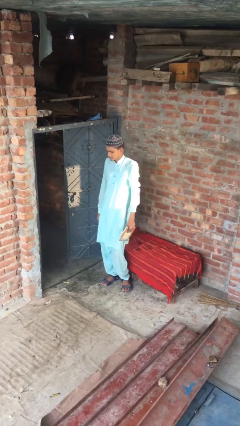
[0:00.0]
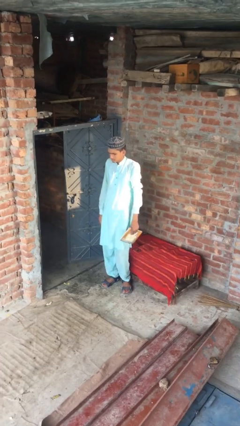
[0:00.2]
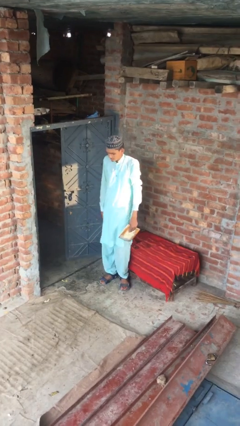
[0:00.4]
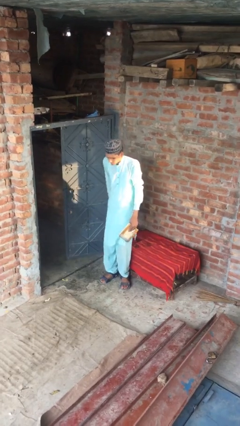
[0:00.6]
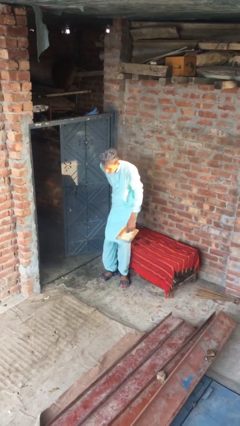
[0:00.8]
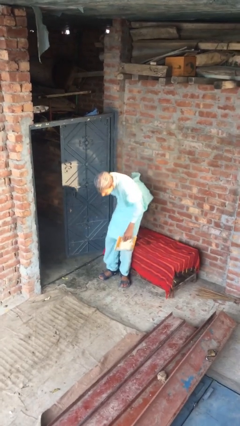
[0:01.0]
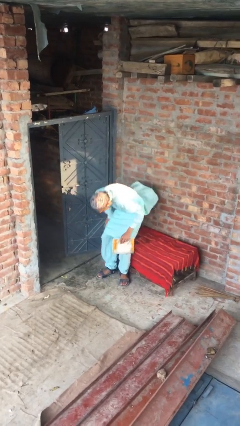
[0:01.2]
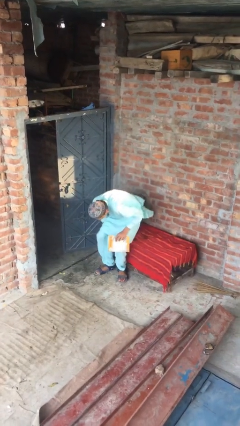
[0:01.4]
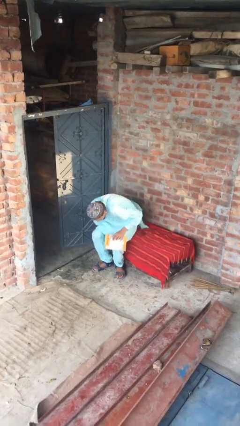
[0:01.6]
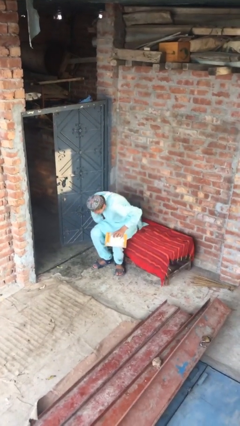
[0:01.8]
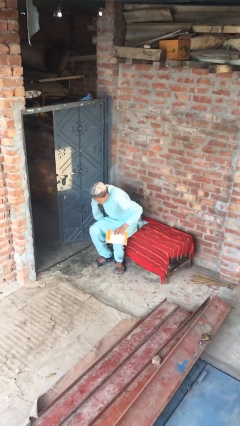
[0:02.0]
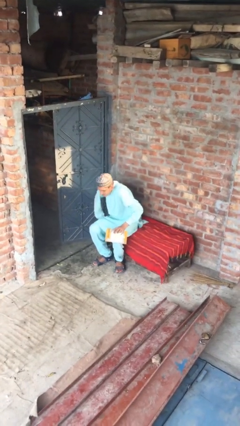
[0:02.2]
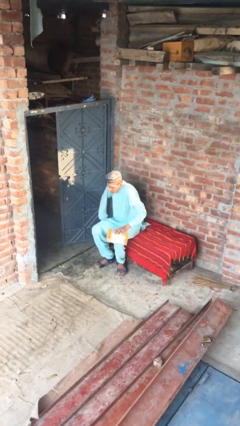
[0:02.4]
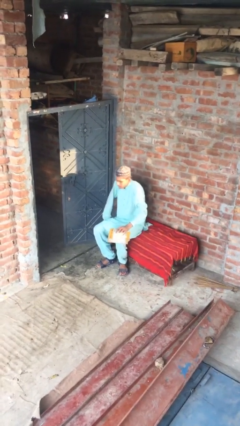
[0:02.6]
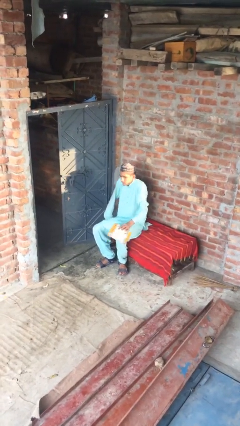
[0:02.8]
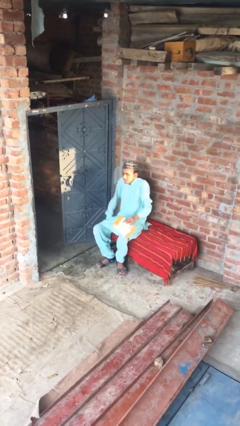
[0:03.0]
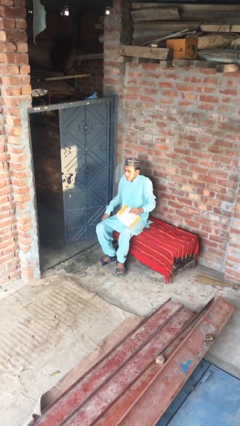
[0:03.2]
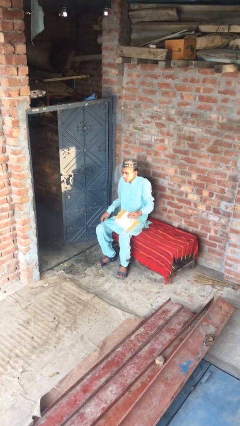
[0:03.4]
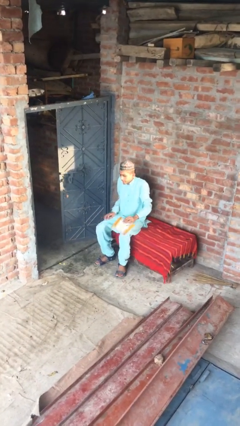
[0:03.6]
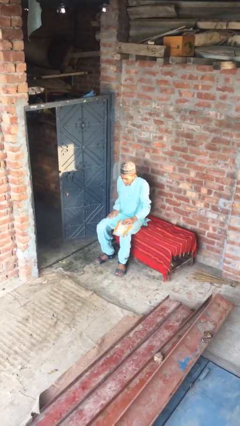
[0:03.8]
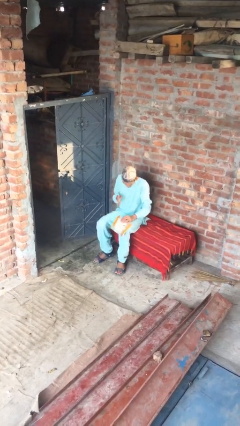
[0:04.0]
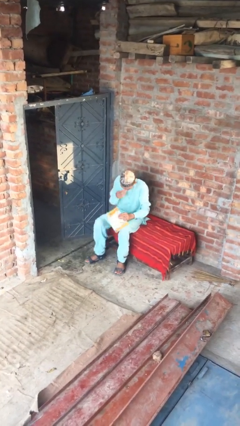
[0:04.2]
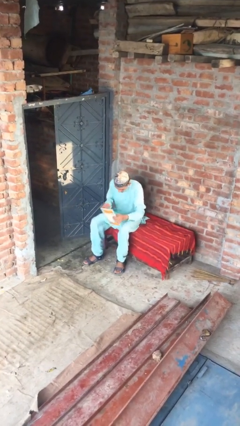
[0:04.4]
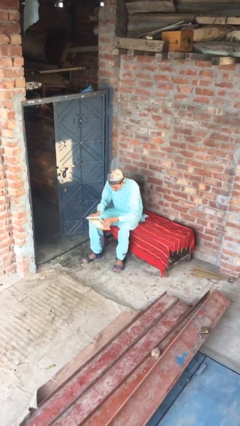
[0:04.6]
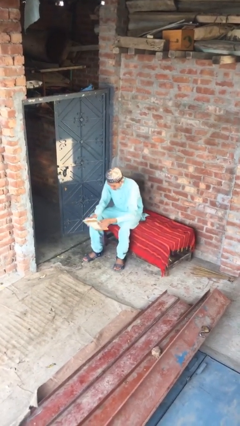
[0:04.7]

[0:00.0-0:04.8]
person sits down

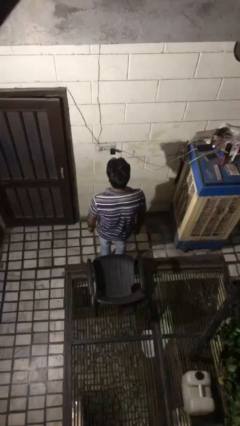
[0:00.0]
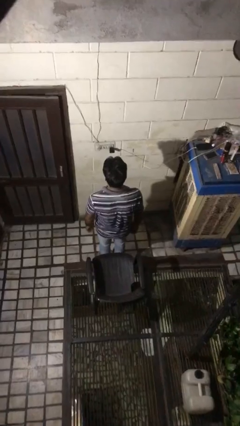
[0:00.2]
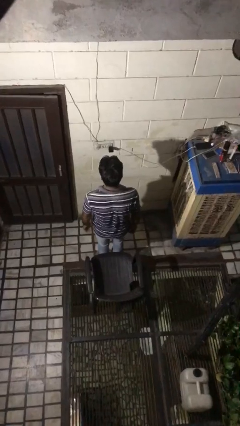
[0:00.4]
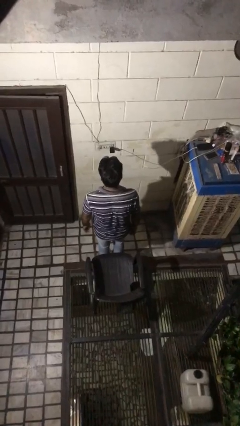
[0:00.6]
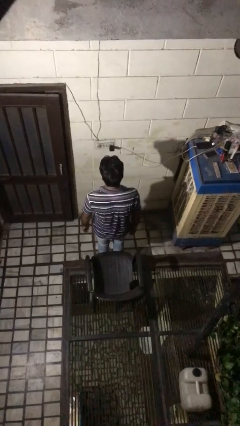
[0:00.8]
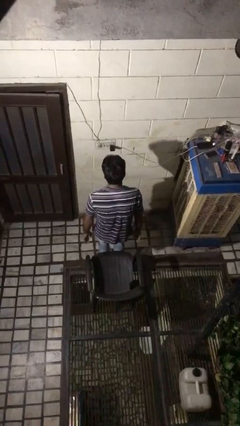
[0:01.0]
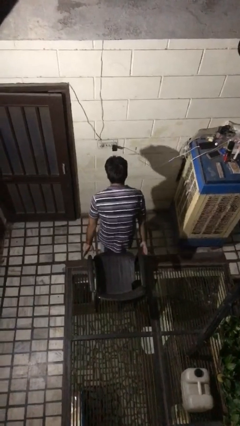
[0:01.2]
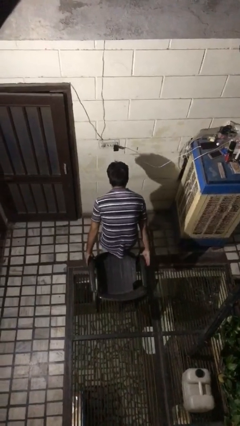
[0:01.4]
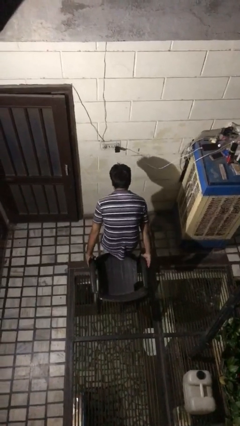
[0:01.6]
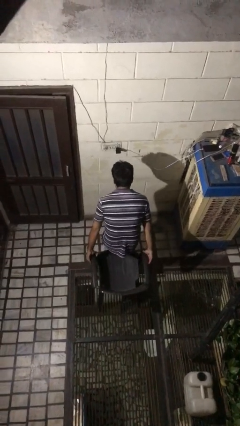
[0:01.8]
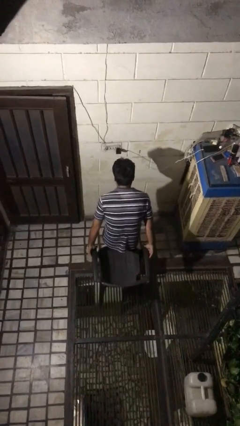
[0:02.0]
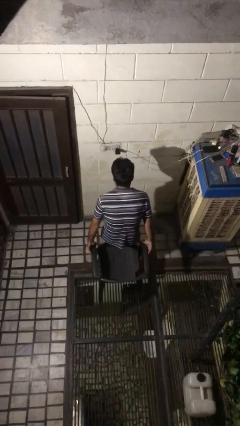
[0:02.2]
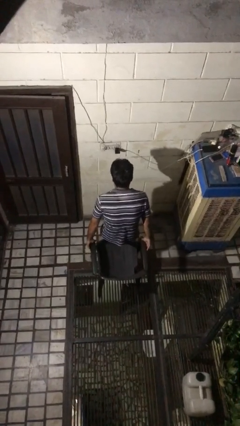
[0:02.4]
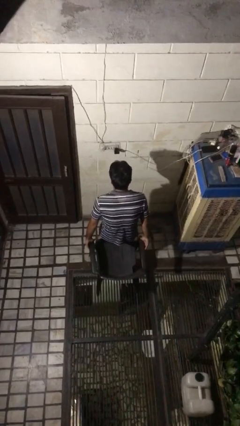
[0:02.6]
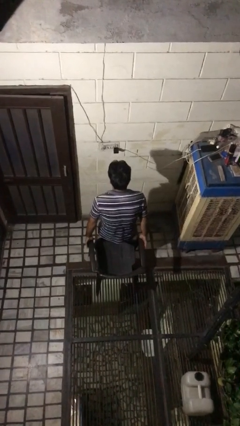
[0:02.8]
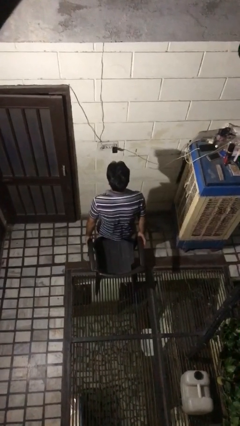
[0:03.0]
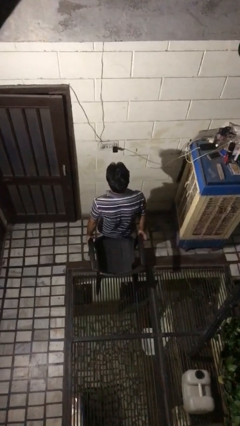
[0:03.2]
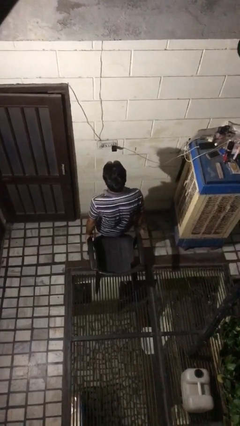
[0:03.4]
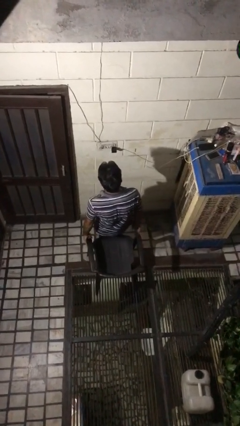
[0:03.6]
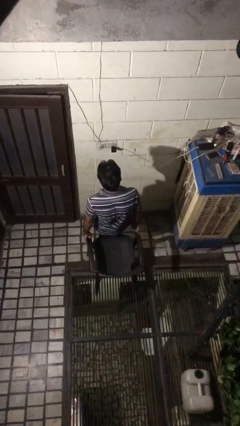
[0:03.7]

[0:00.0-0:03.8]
person pulls out chair

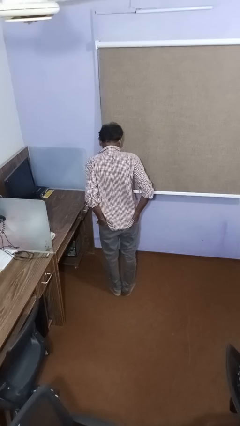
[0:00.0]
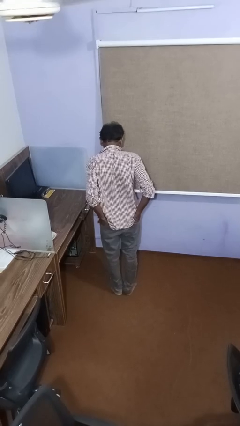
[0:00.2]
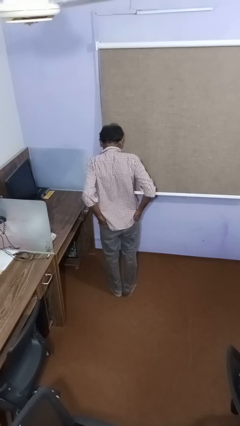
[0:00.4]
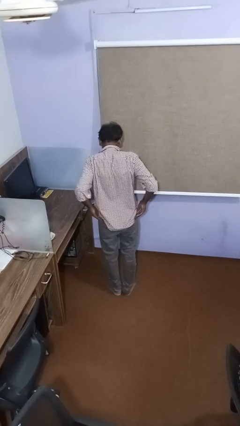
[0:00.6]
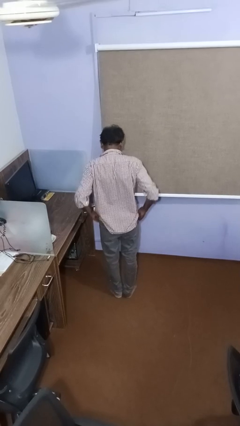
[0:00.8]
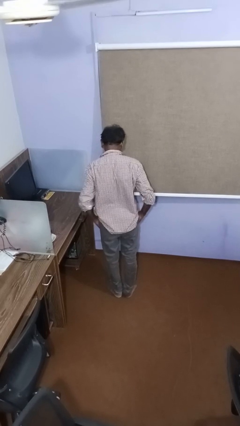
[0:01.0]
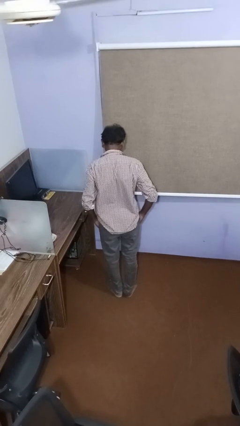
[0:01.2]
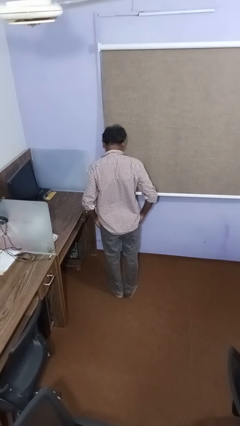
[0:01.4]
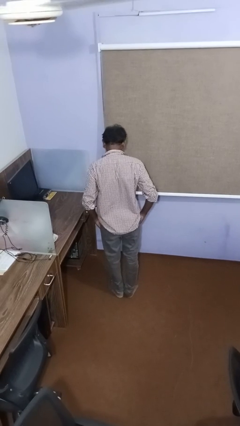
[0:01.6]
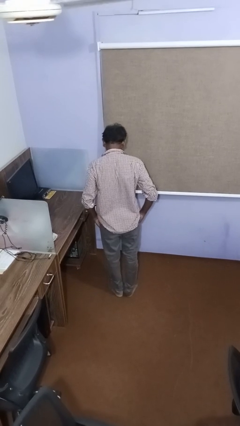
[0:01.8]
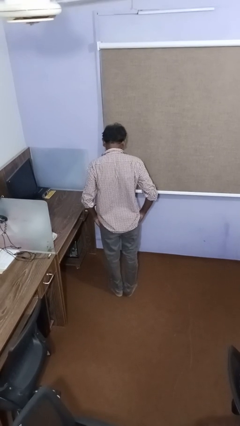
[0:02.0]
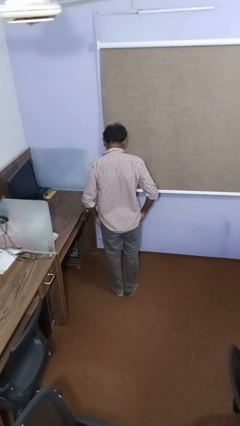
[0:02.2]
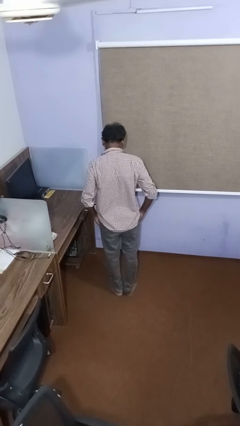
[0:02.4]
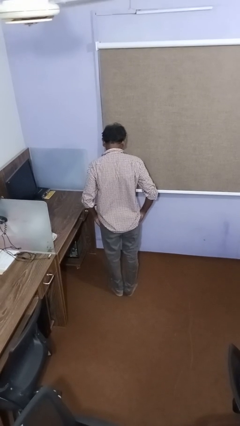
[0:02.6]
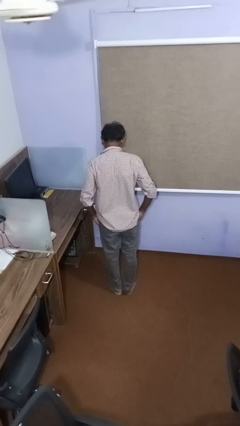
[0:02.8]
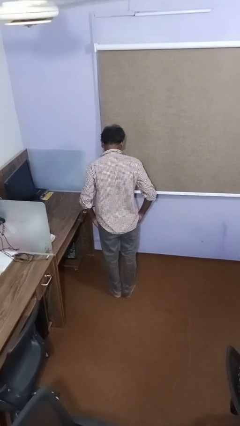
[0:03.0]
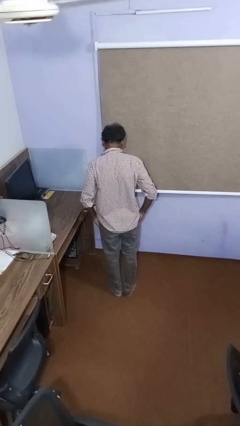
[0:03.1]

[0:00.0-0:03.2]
person puts hands in back pockets

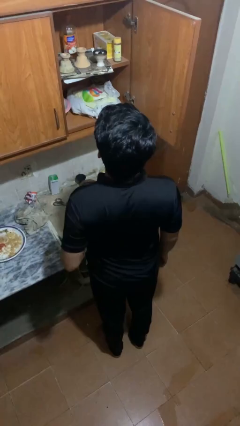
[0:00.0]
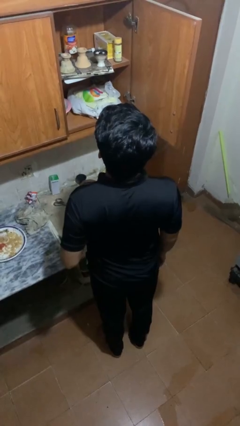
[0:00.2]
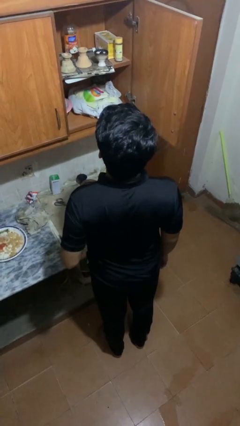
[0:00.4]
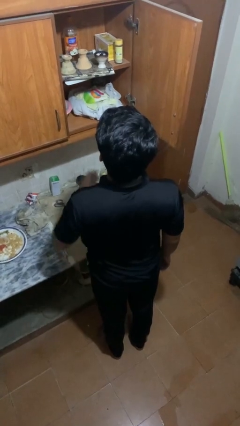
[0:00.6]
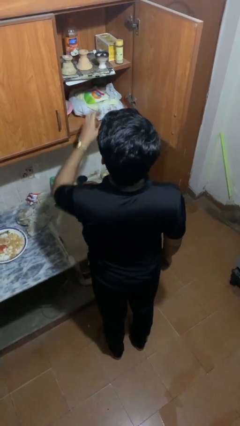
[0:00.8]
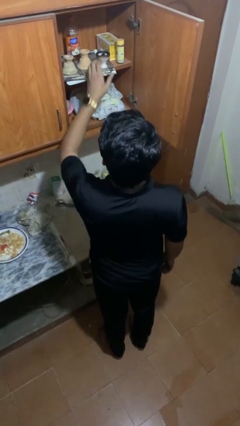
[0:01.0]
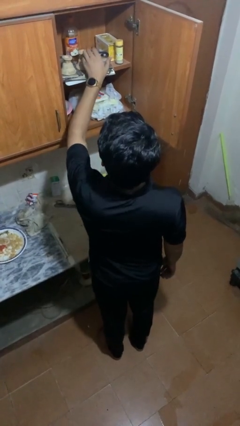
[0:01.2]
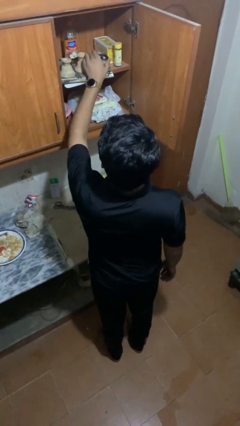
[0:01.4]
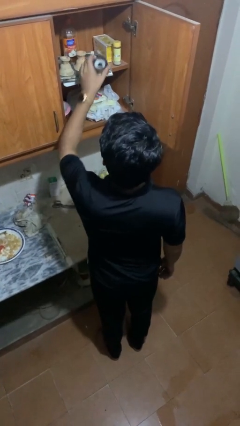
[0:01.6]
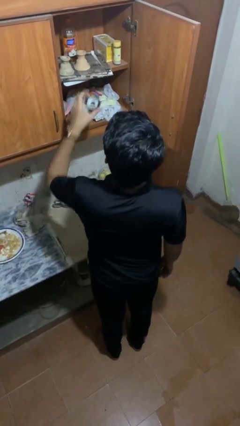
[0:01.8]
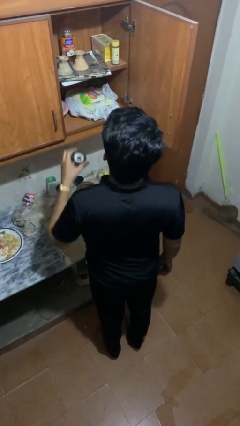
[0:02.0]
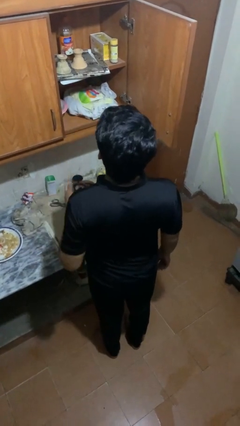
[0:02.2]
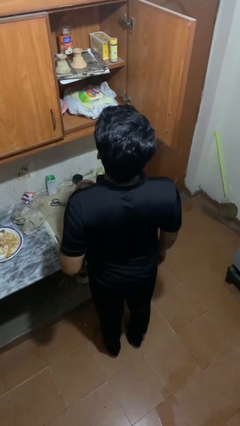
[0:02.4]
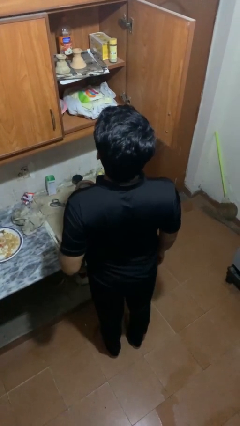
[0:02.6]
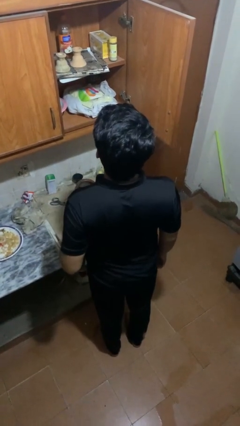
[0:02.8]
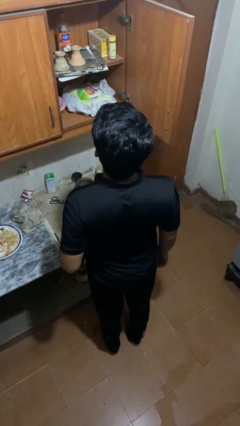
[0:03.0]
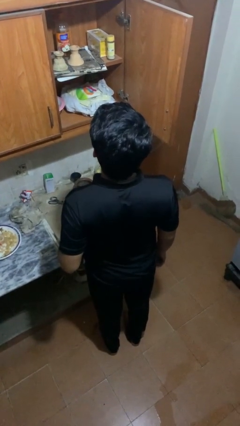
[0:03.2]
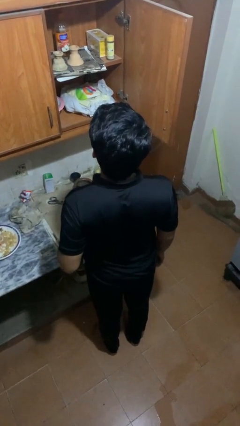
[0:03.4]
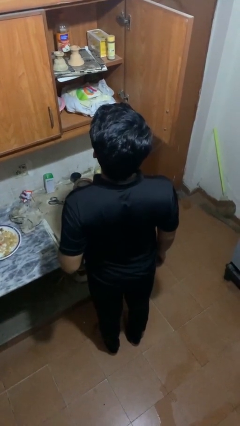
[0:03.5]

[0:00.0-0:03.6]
person takes object from cabinet

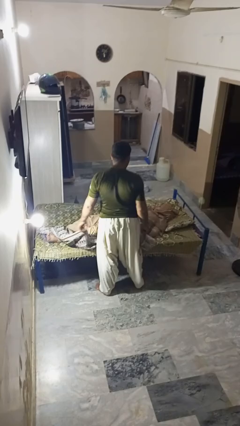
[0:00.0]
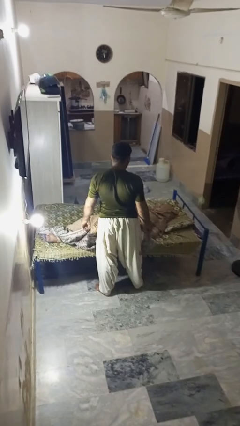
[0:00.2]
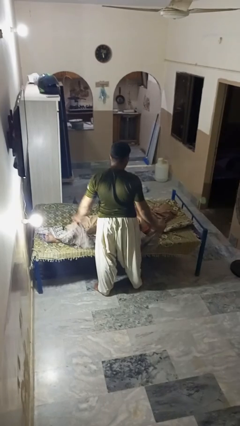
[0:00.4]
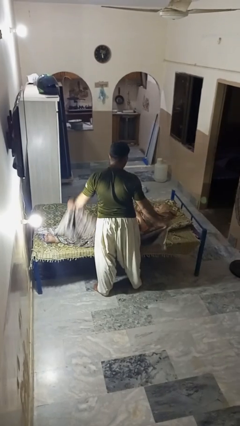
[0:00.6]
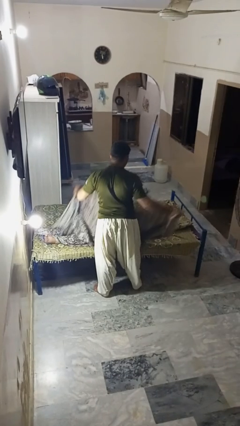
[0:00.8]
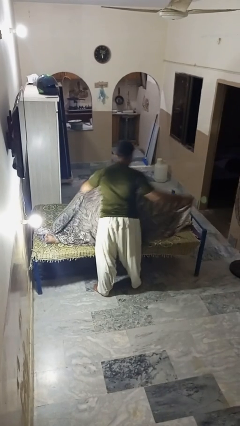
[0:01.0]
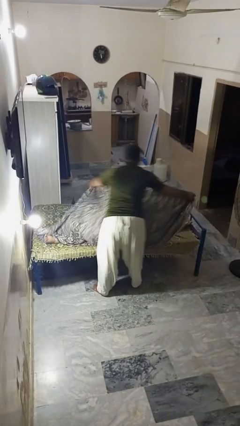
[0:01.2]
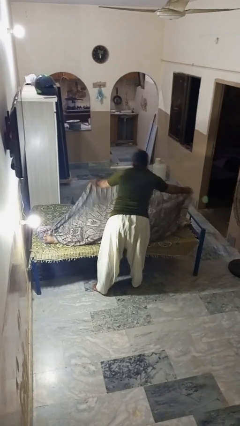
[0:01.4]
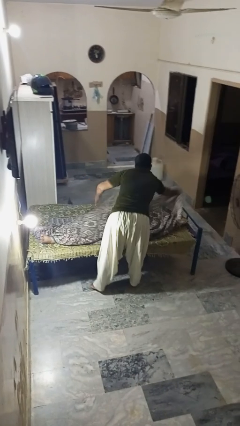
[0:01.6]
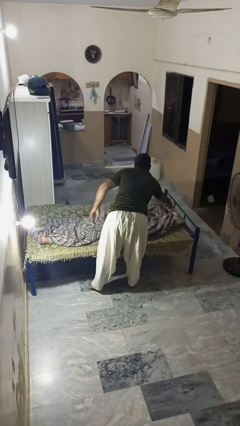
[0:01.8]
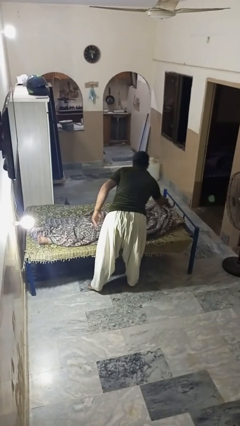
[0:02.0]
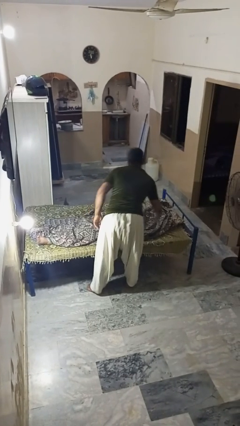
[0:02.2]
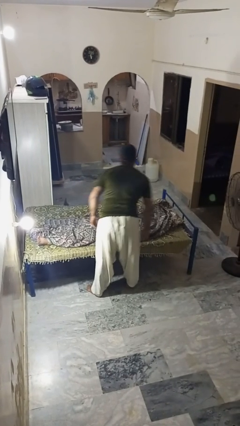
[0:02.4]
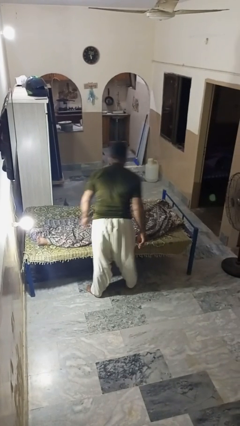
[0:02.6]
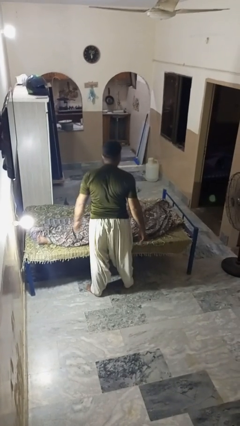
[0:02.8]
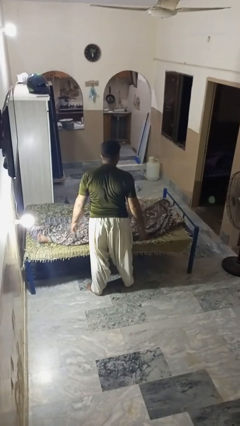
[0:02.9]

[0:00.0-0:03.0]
person covers friend with blanket
